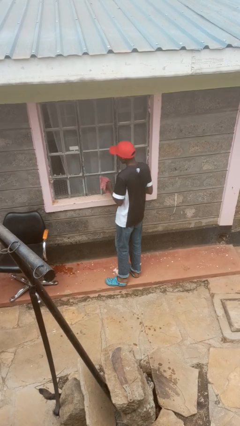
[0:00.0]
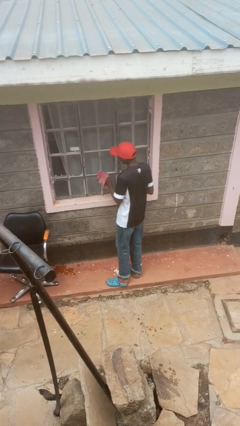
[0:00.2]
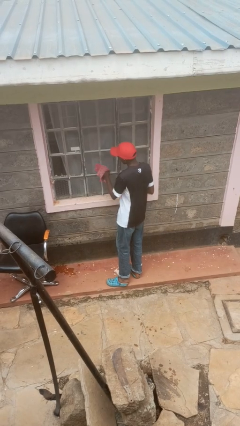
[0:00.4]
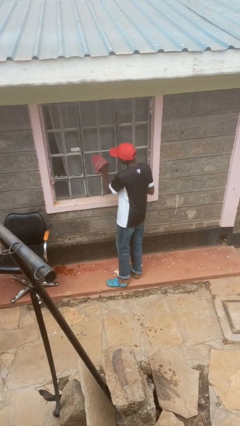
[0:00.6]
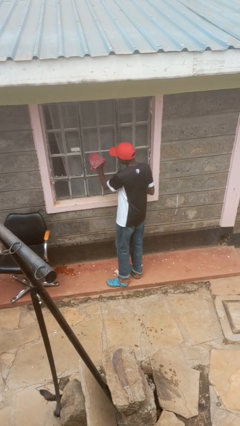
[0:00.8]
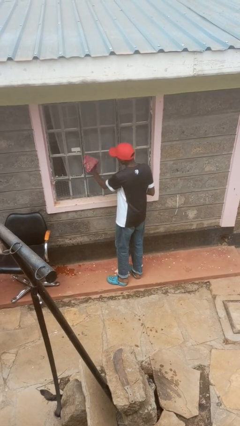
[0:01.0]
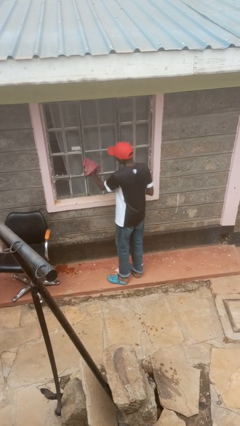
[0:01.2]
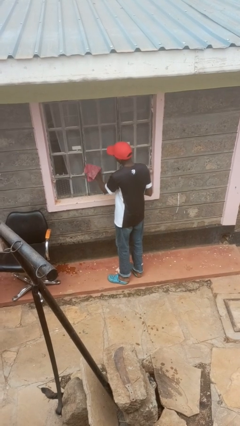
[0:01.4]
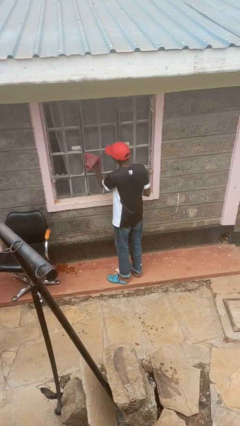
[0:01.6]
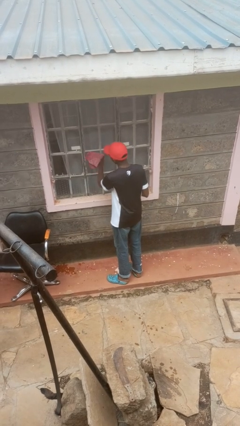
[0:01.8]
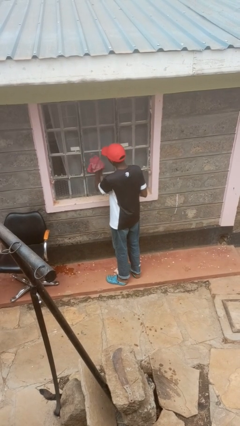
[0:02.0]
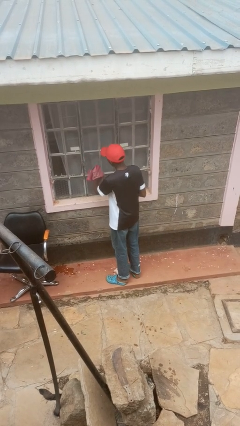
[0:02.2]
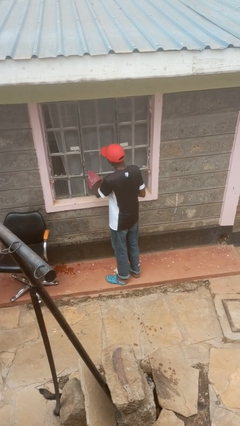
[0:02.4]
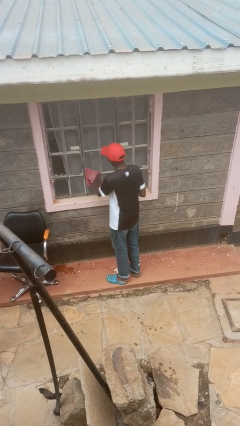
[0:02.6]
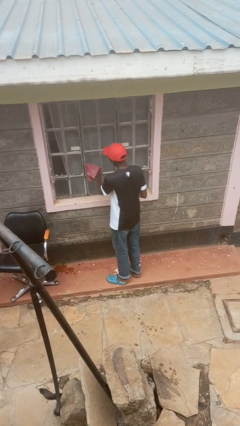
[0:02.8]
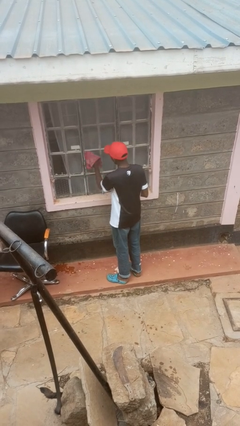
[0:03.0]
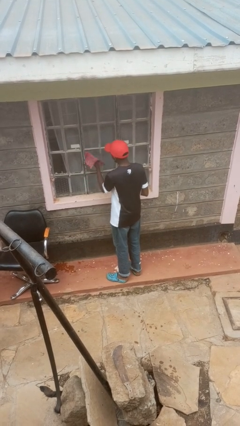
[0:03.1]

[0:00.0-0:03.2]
person washes window

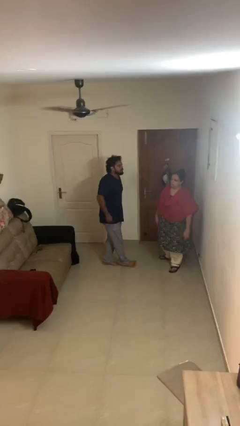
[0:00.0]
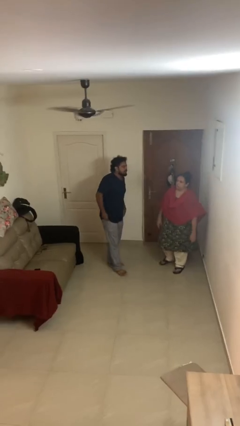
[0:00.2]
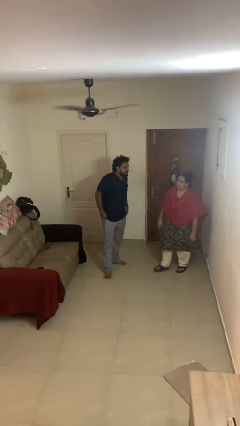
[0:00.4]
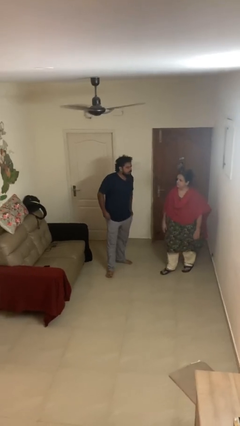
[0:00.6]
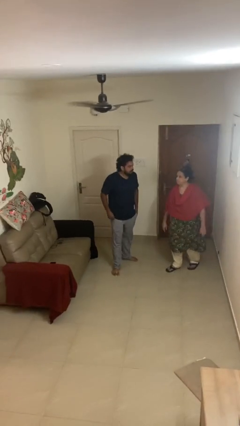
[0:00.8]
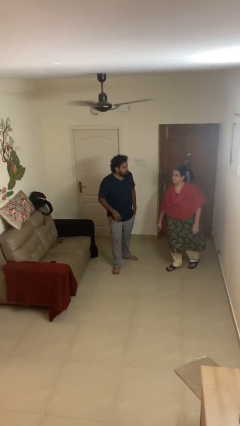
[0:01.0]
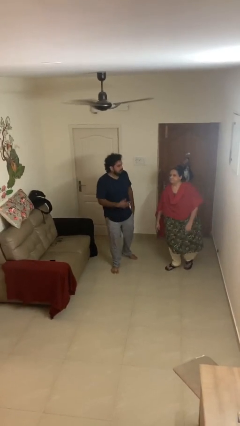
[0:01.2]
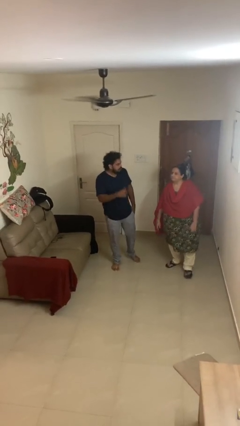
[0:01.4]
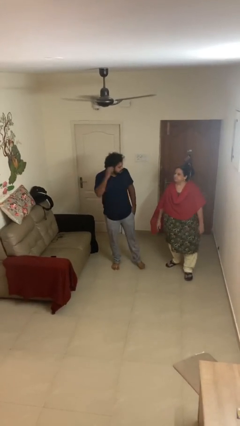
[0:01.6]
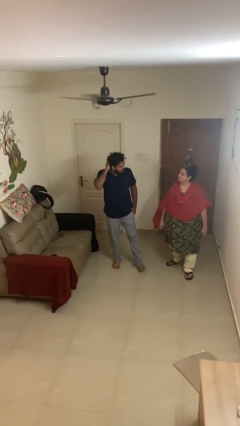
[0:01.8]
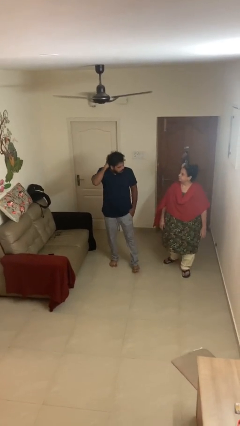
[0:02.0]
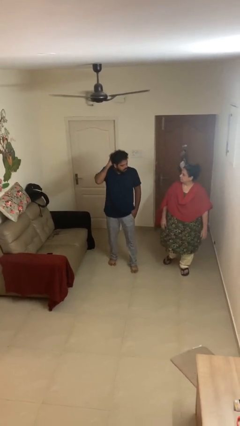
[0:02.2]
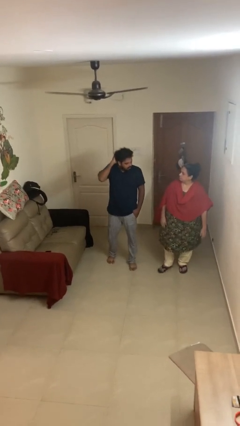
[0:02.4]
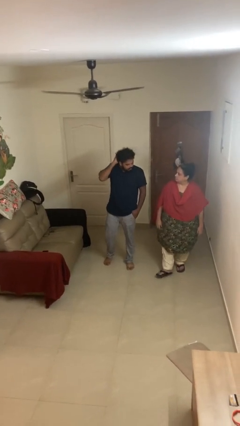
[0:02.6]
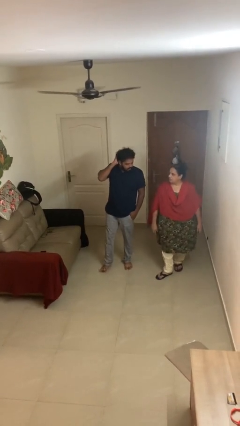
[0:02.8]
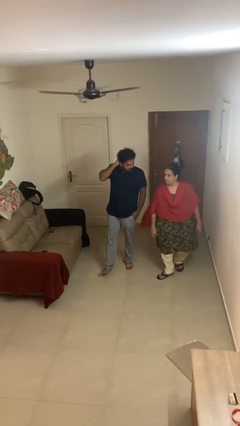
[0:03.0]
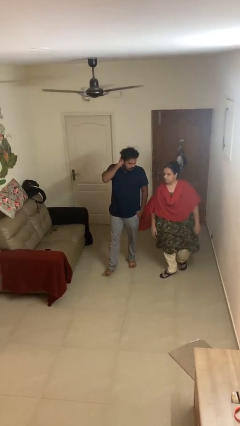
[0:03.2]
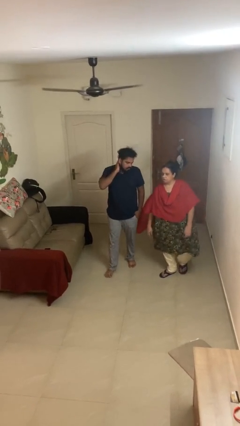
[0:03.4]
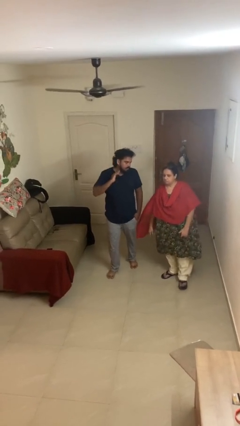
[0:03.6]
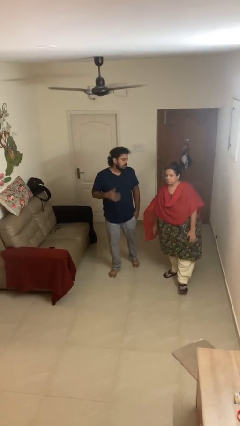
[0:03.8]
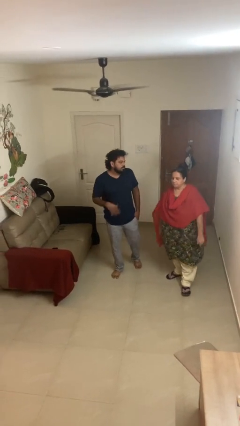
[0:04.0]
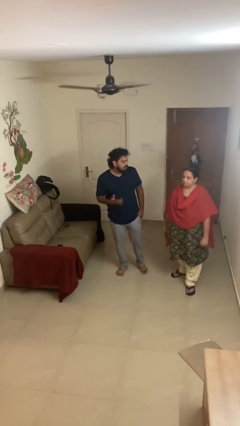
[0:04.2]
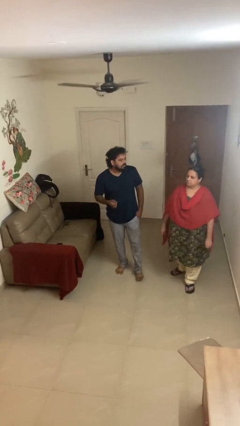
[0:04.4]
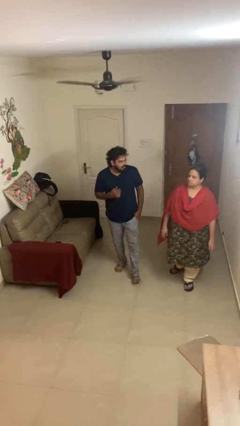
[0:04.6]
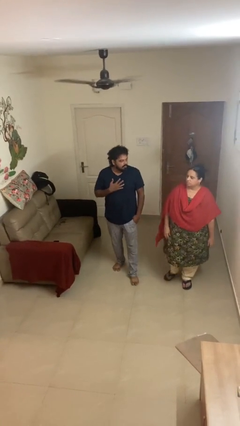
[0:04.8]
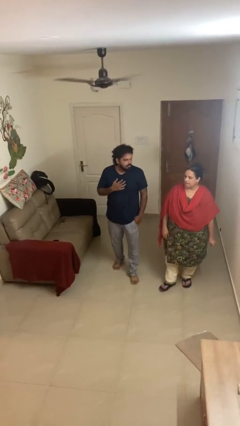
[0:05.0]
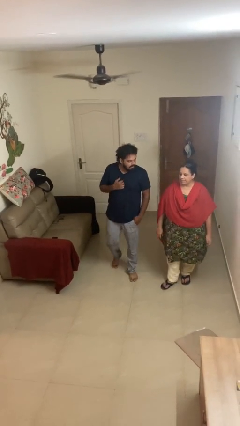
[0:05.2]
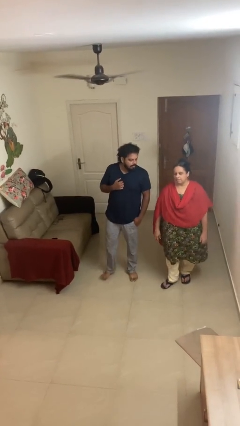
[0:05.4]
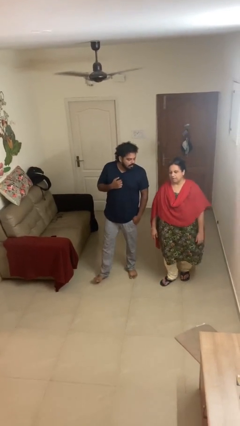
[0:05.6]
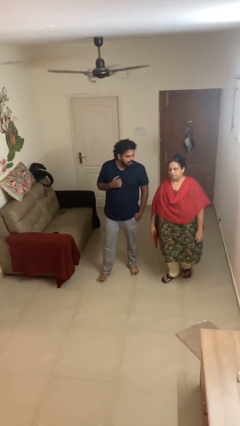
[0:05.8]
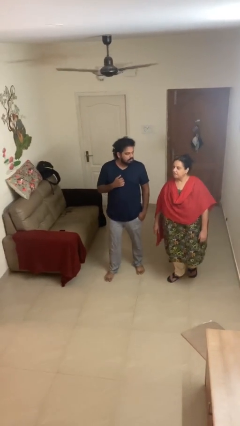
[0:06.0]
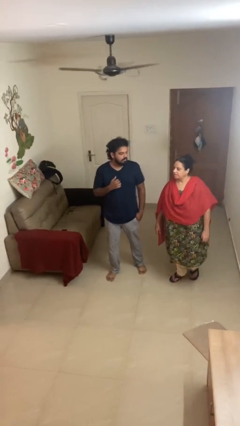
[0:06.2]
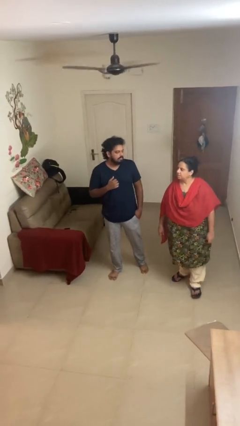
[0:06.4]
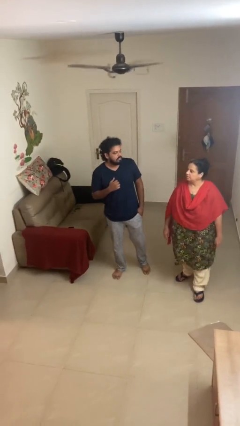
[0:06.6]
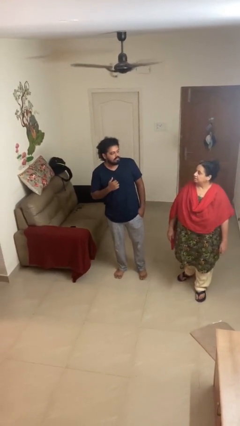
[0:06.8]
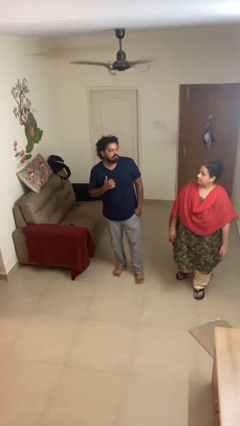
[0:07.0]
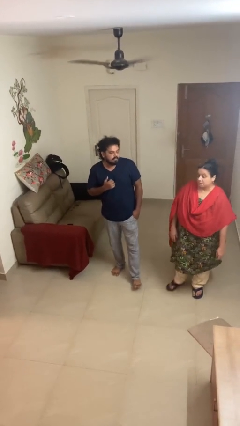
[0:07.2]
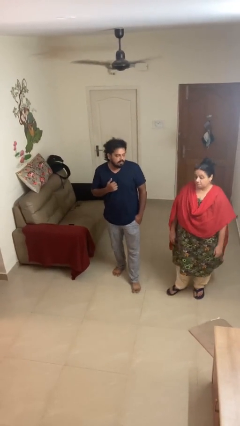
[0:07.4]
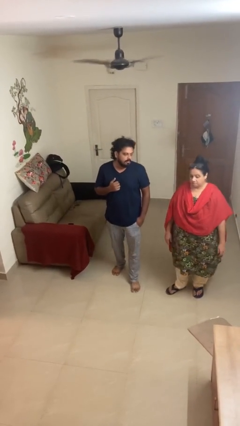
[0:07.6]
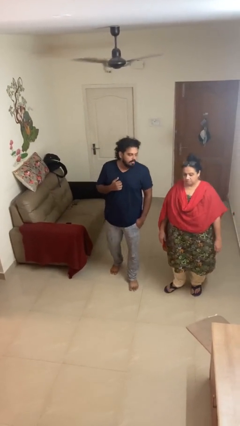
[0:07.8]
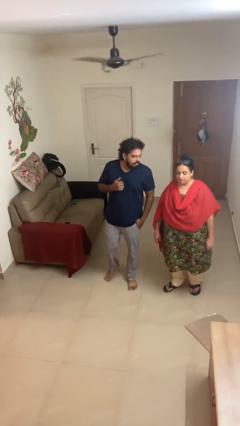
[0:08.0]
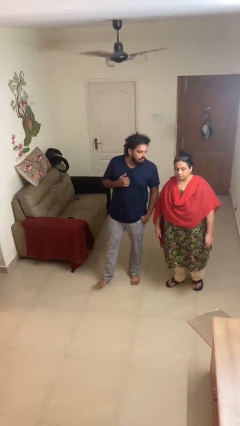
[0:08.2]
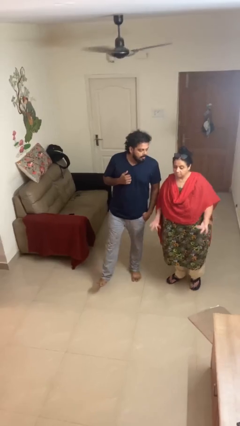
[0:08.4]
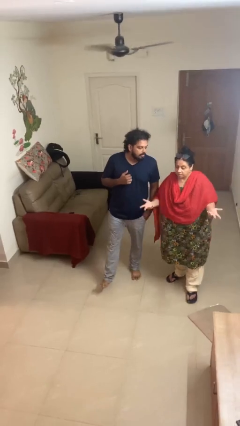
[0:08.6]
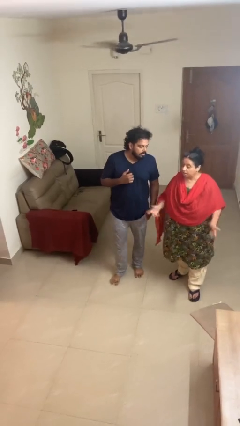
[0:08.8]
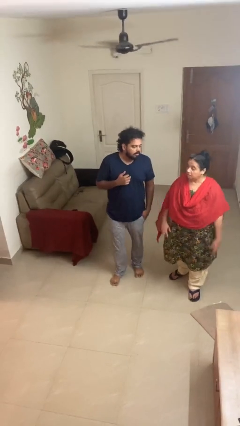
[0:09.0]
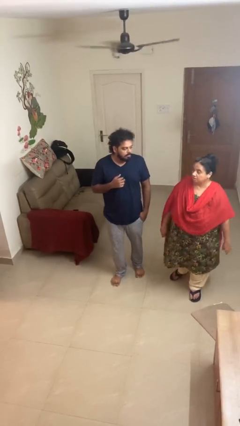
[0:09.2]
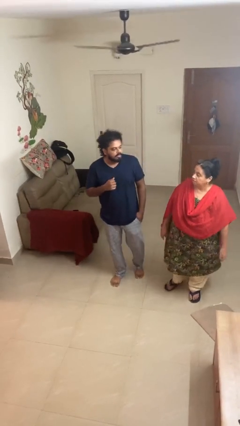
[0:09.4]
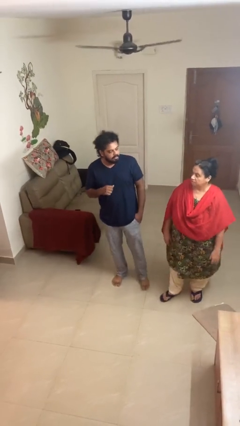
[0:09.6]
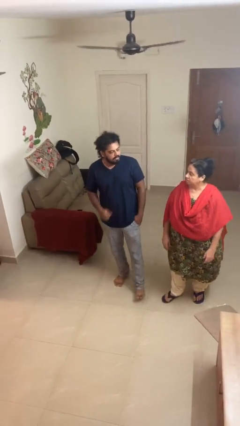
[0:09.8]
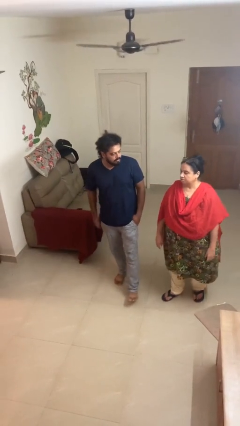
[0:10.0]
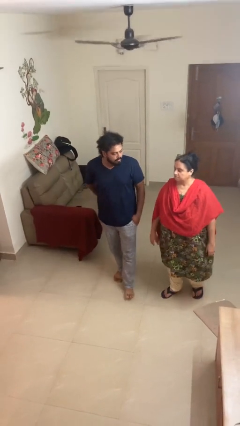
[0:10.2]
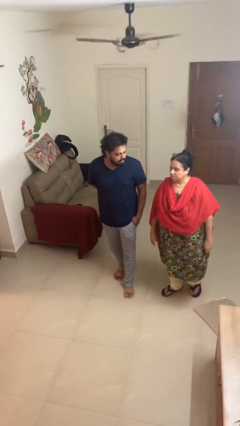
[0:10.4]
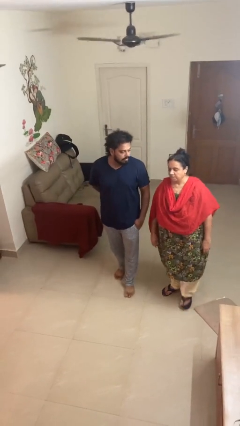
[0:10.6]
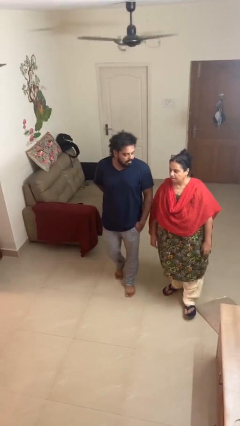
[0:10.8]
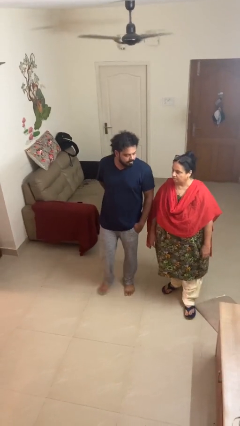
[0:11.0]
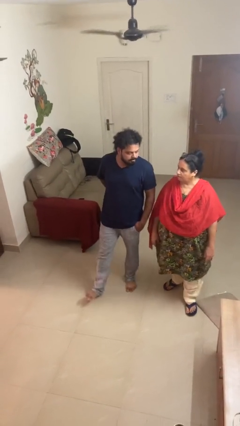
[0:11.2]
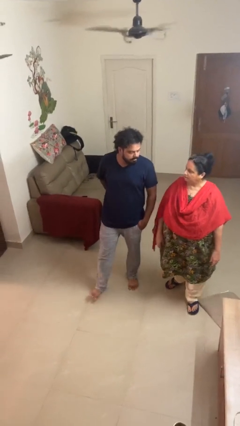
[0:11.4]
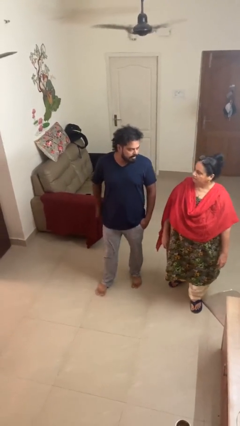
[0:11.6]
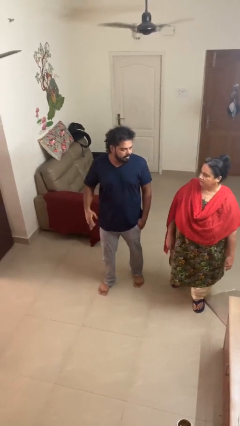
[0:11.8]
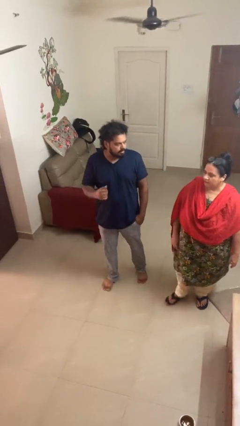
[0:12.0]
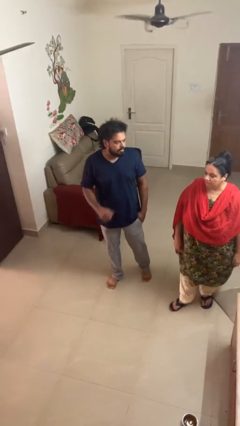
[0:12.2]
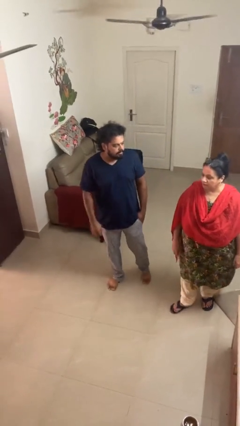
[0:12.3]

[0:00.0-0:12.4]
person talks to person

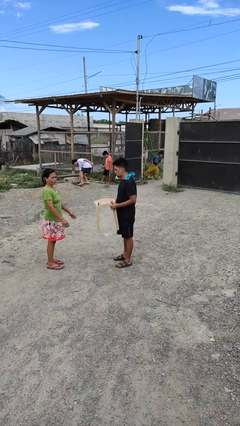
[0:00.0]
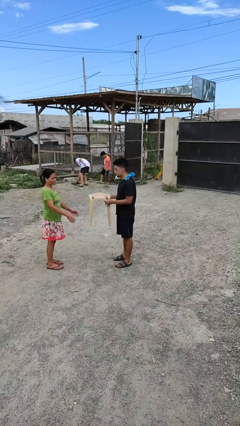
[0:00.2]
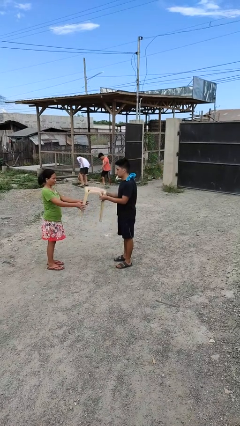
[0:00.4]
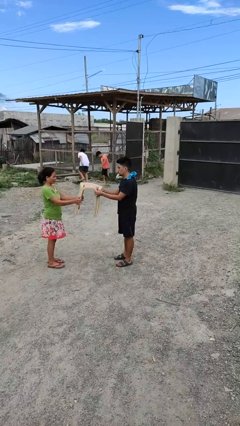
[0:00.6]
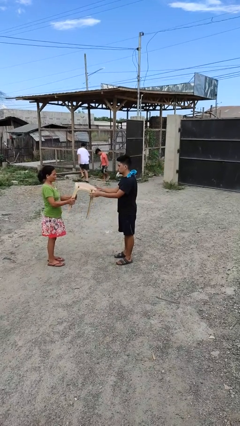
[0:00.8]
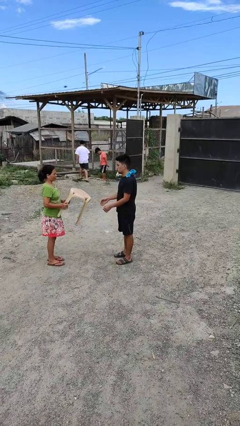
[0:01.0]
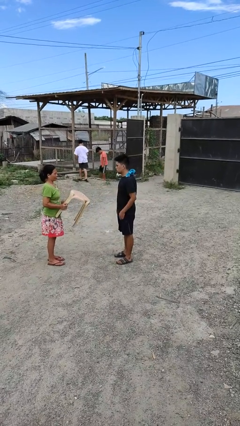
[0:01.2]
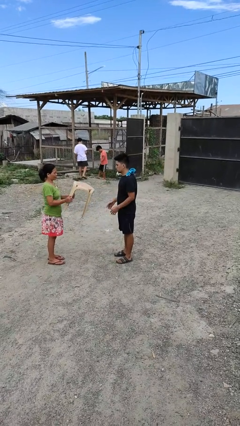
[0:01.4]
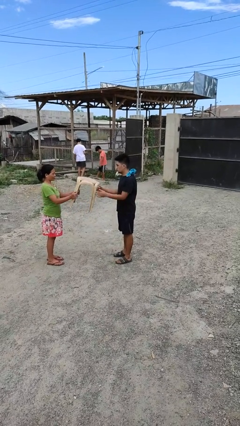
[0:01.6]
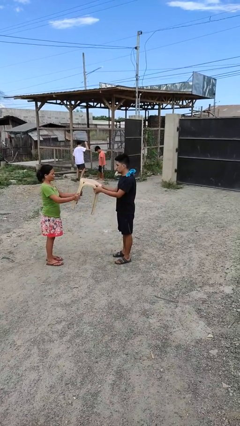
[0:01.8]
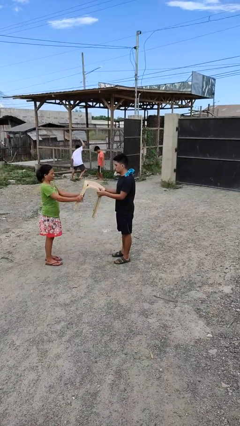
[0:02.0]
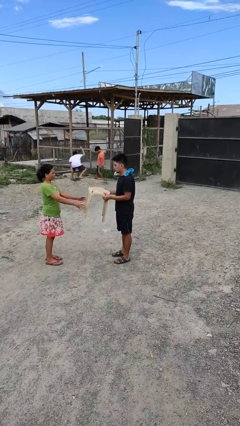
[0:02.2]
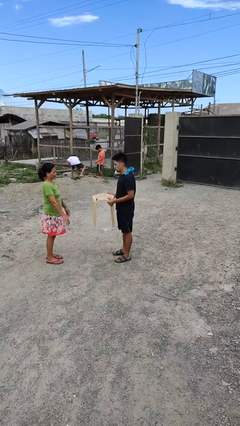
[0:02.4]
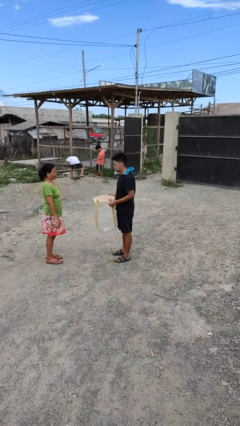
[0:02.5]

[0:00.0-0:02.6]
person transfers object to person
